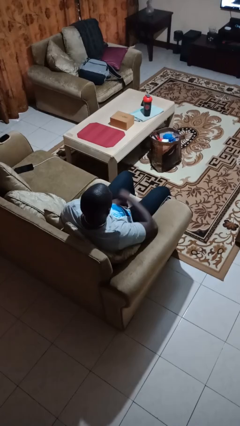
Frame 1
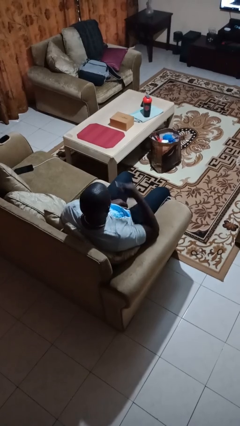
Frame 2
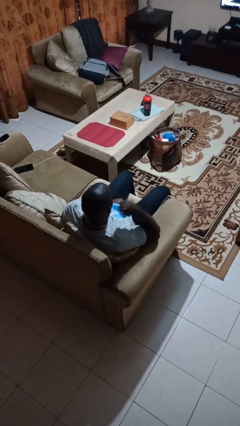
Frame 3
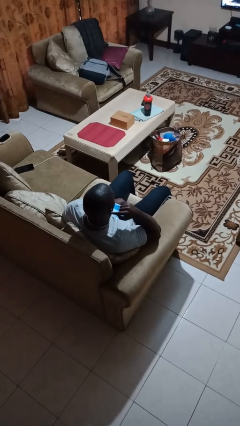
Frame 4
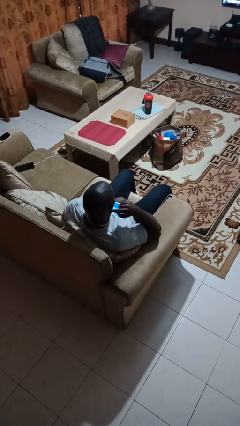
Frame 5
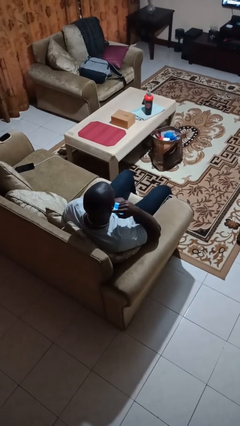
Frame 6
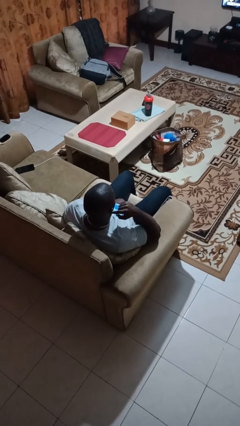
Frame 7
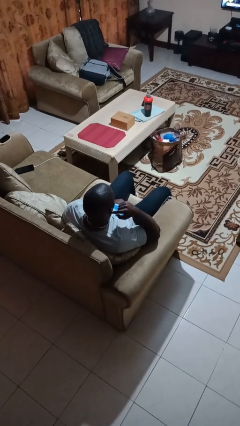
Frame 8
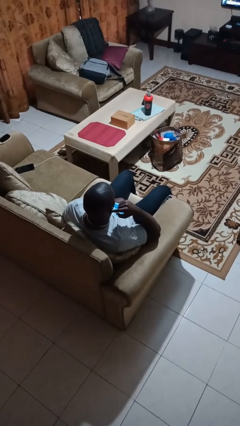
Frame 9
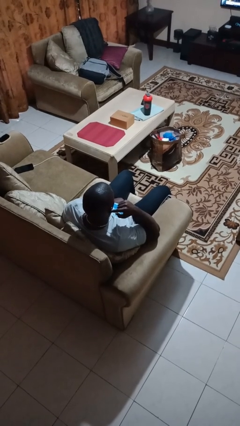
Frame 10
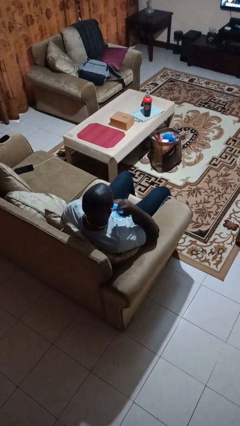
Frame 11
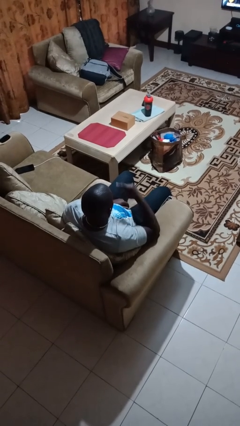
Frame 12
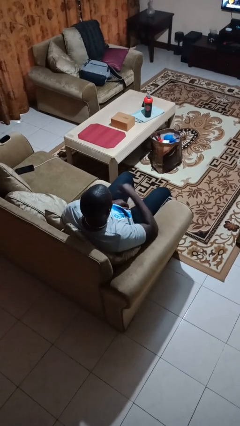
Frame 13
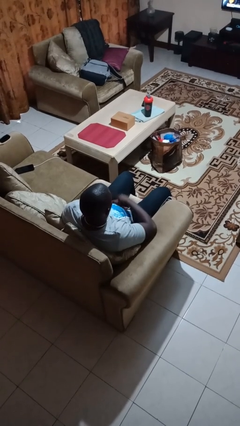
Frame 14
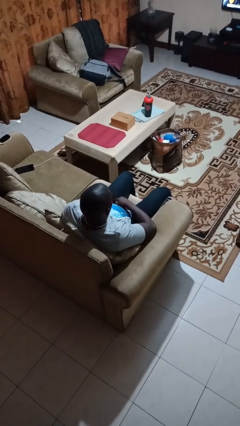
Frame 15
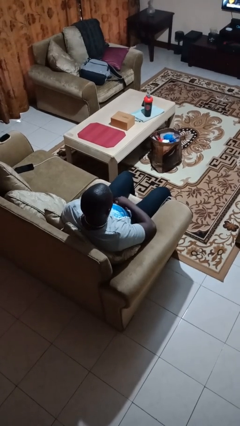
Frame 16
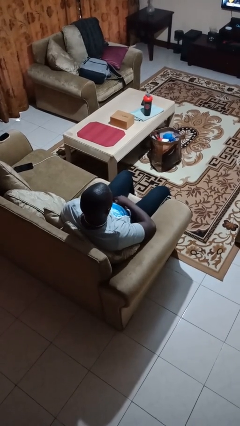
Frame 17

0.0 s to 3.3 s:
person gestures listen closely

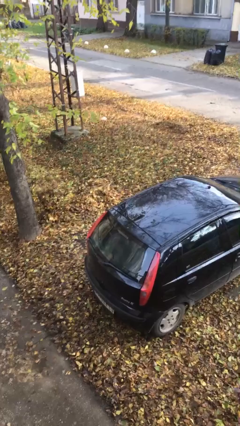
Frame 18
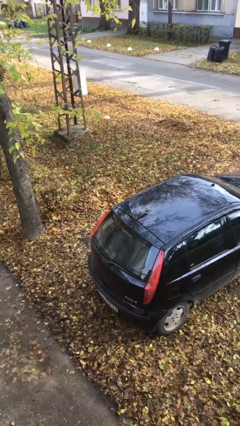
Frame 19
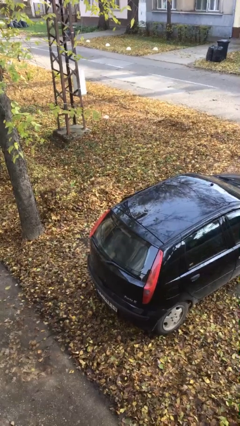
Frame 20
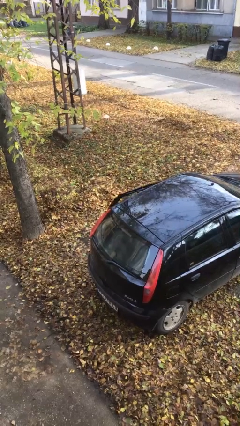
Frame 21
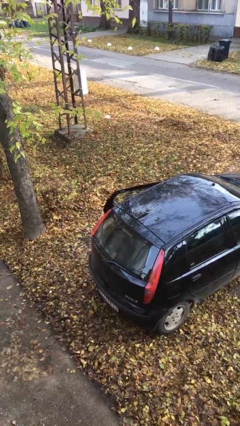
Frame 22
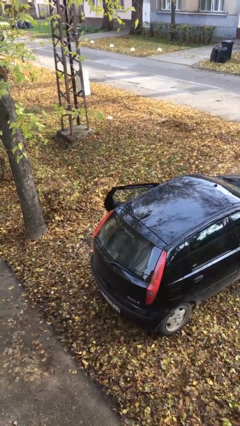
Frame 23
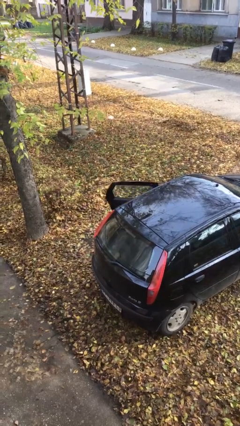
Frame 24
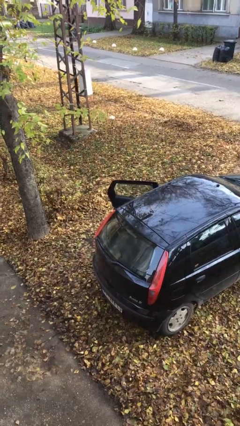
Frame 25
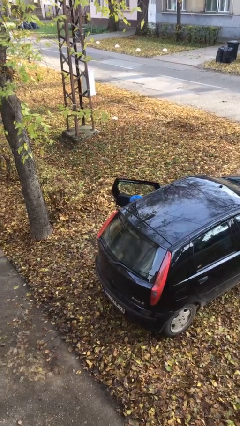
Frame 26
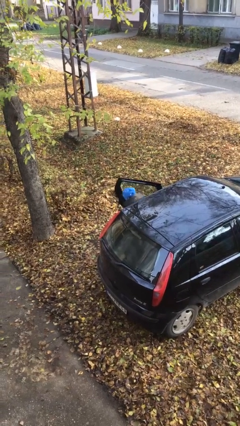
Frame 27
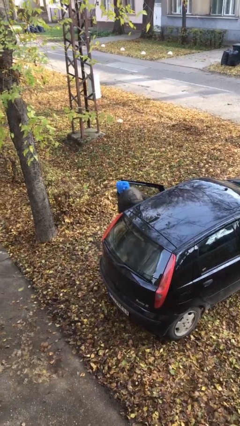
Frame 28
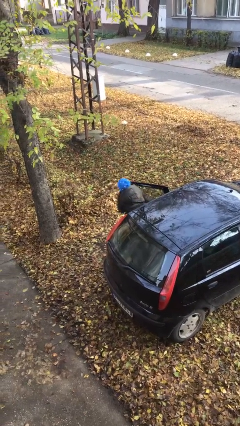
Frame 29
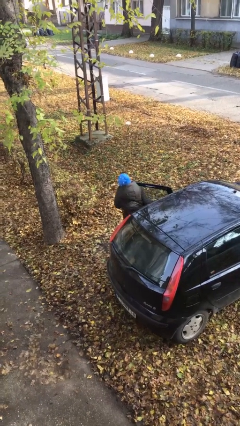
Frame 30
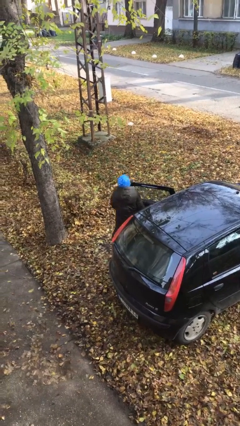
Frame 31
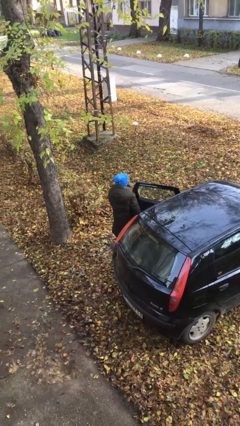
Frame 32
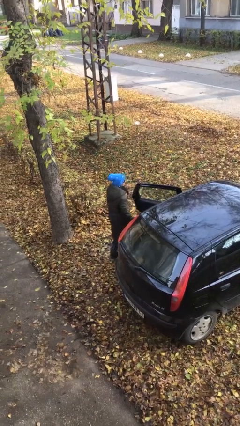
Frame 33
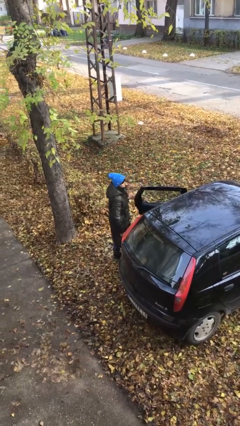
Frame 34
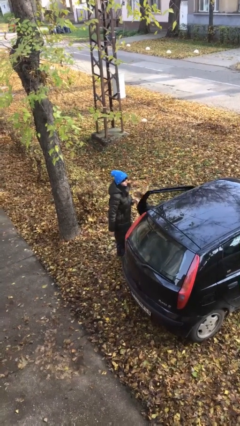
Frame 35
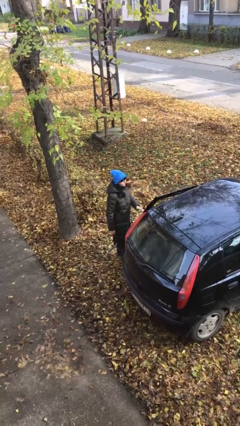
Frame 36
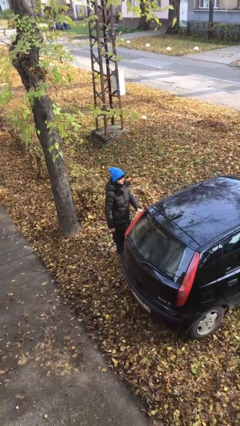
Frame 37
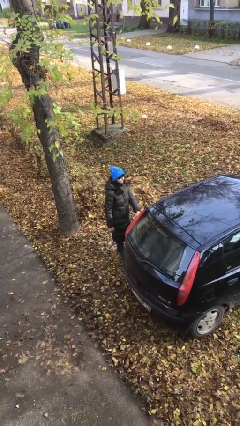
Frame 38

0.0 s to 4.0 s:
person exits car

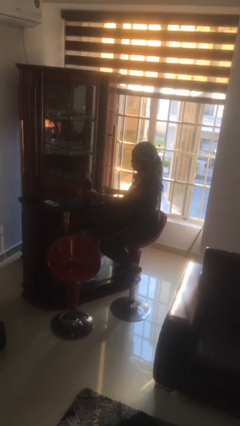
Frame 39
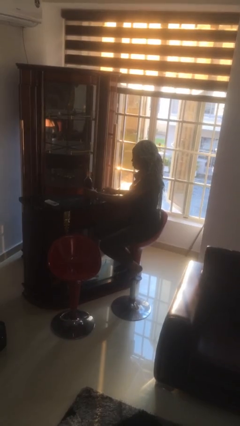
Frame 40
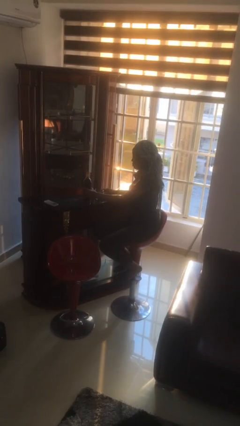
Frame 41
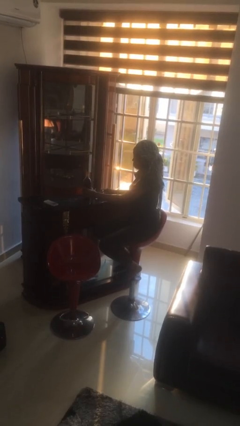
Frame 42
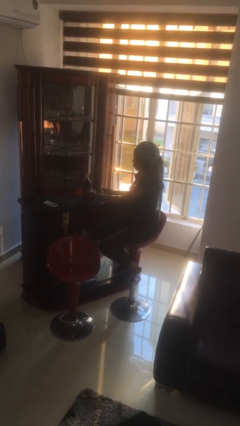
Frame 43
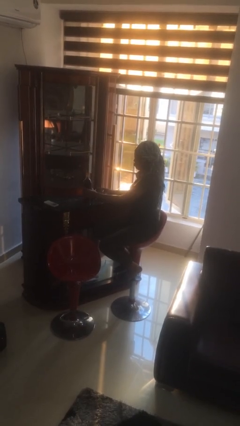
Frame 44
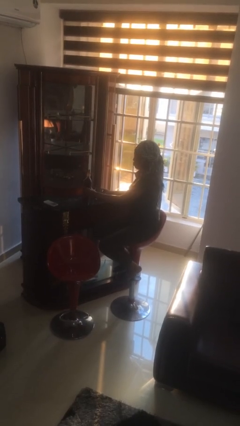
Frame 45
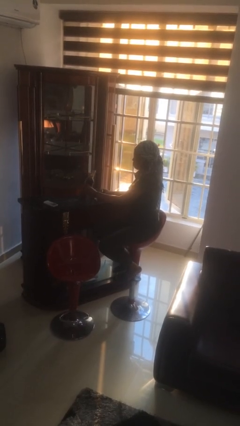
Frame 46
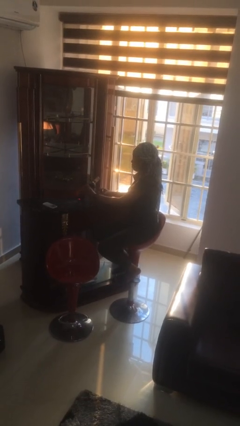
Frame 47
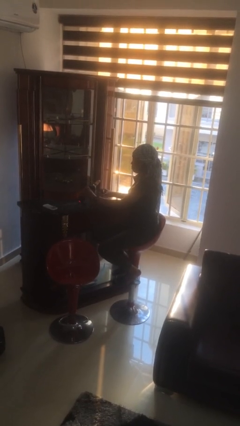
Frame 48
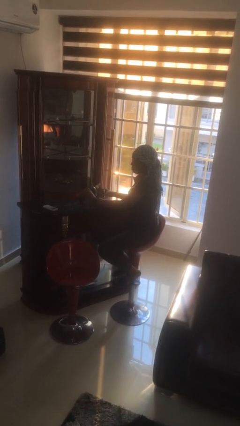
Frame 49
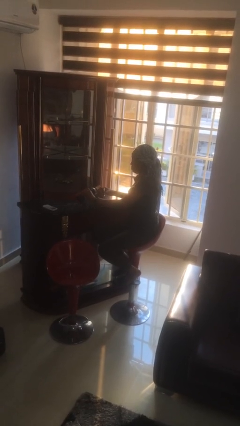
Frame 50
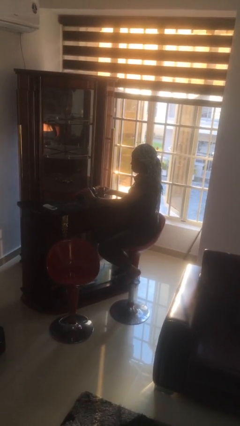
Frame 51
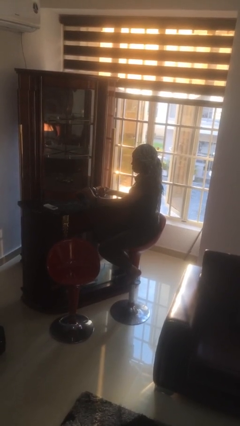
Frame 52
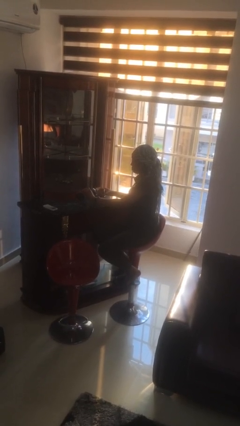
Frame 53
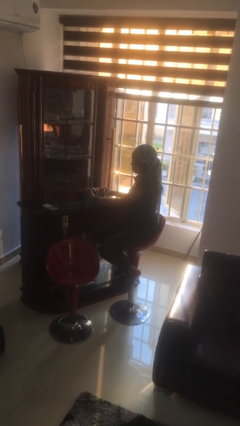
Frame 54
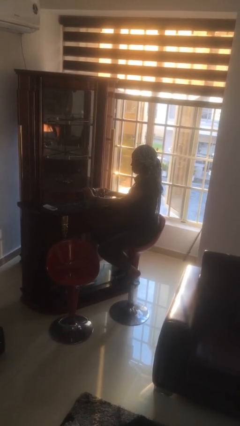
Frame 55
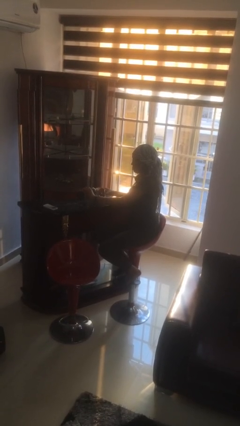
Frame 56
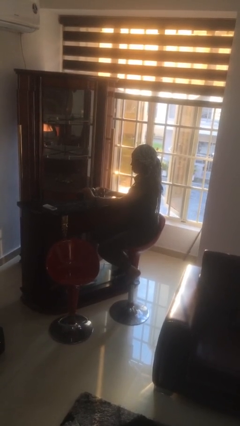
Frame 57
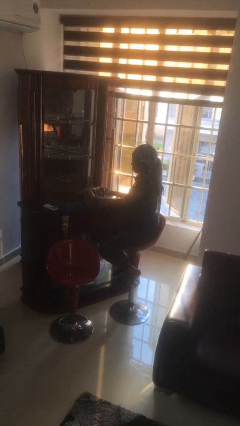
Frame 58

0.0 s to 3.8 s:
person pours liquid into cup

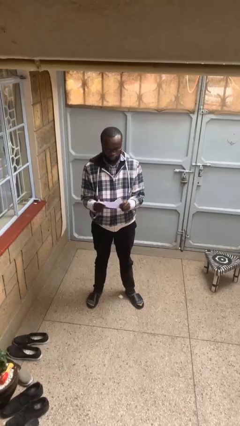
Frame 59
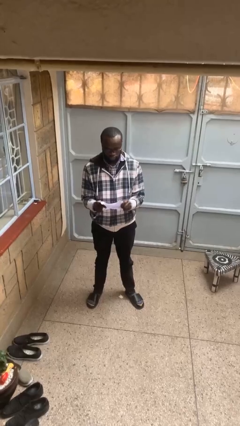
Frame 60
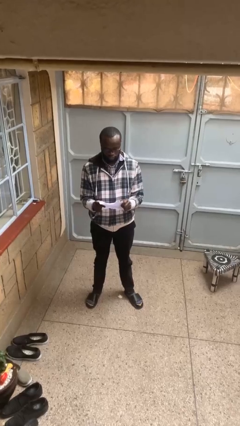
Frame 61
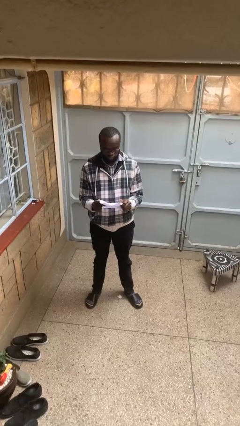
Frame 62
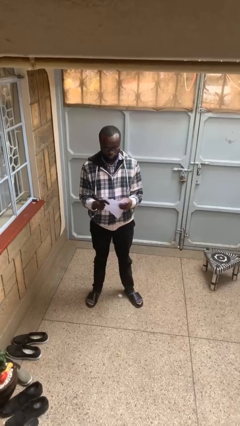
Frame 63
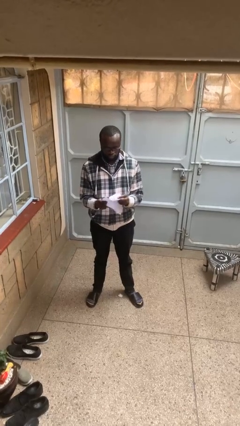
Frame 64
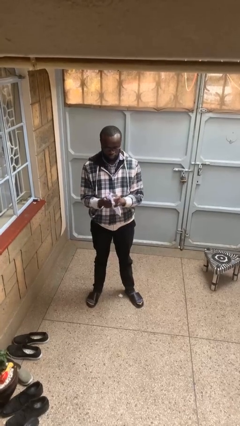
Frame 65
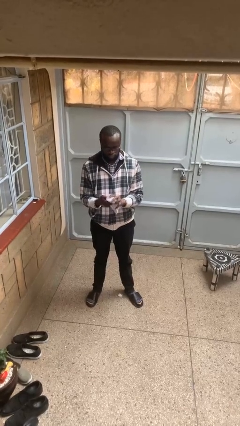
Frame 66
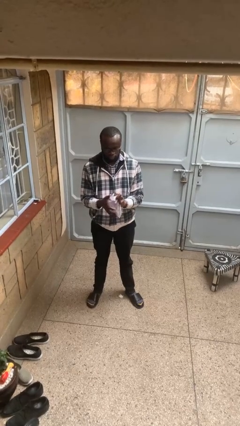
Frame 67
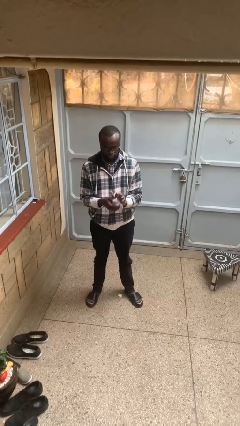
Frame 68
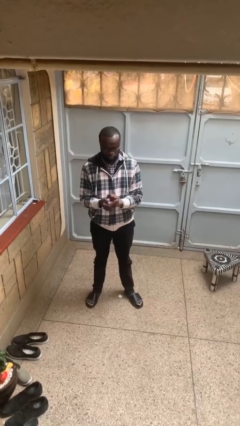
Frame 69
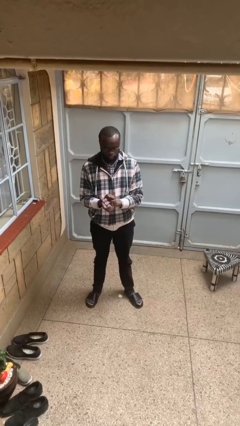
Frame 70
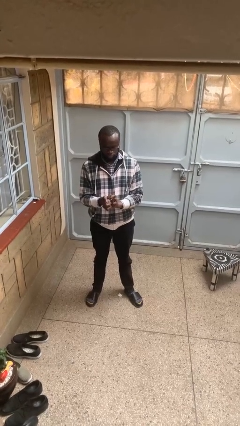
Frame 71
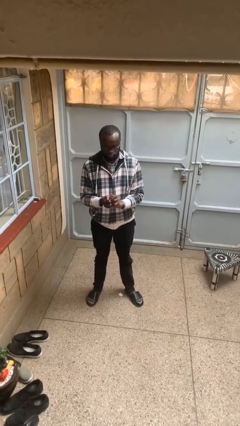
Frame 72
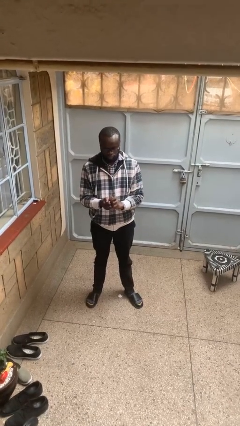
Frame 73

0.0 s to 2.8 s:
person crumples paper

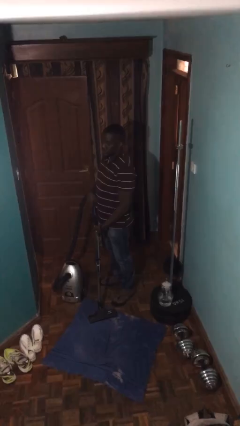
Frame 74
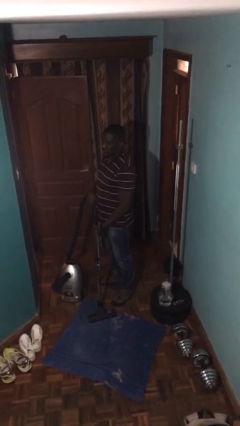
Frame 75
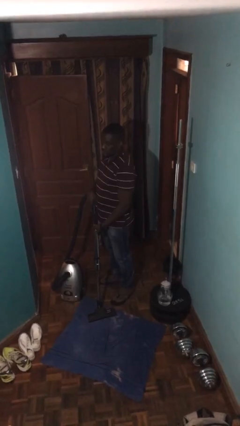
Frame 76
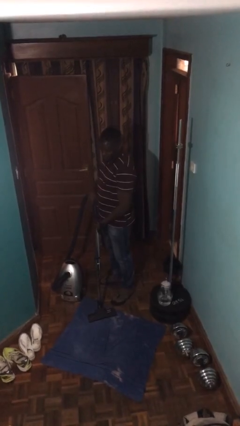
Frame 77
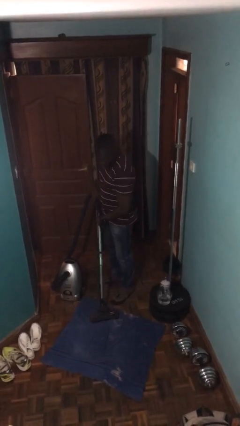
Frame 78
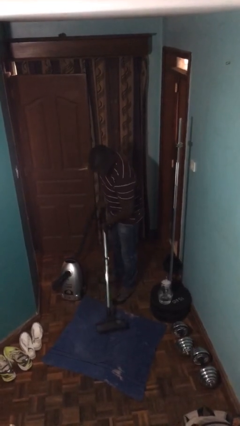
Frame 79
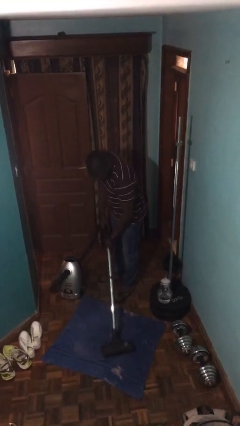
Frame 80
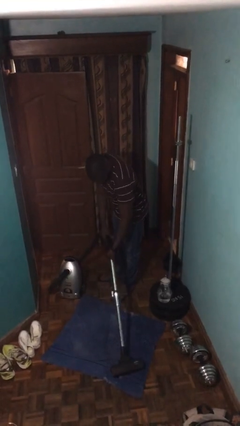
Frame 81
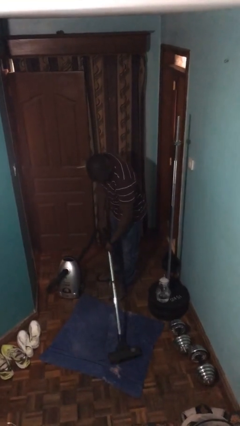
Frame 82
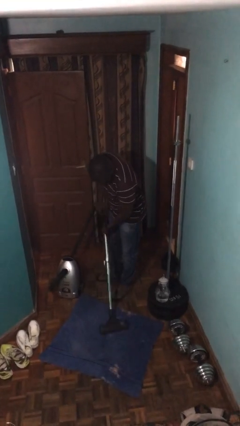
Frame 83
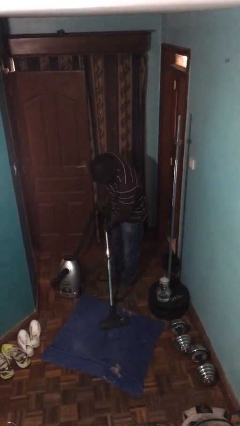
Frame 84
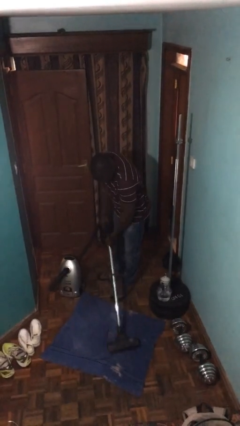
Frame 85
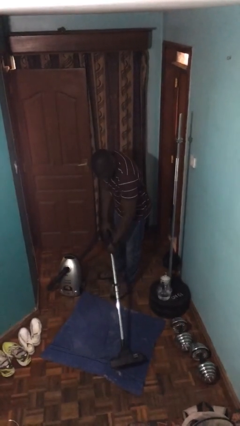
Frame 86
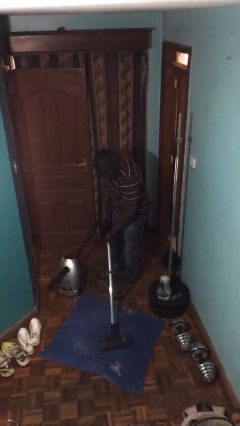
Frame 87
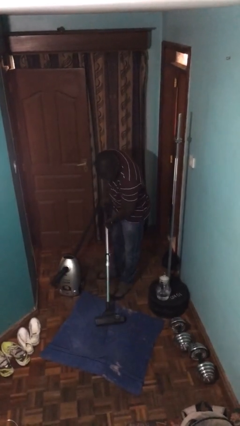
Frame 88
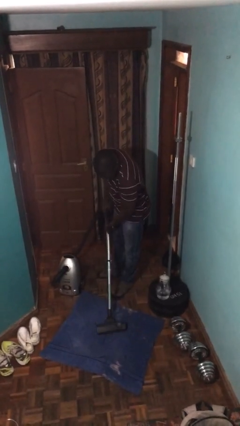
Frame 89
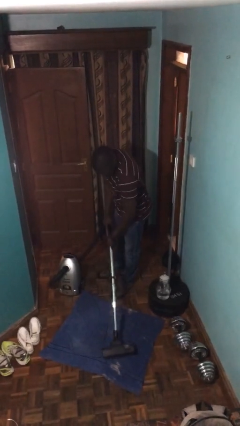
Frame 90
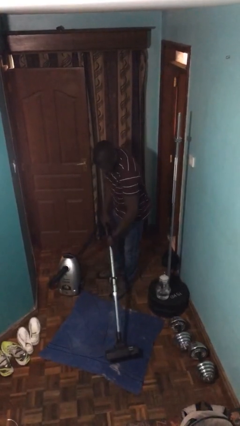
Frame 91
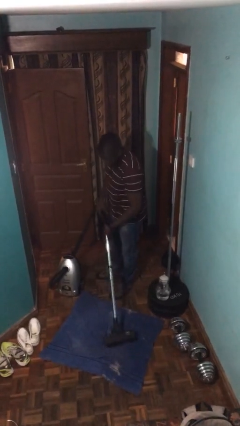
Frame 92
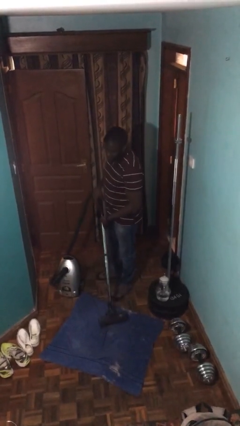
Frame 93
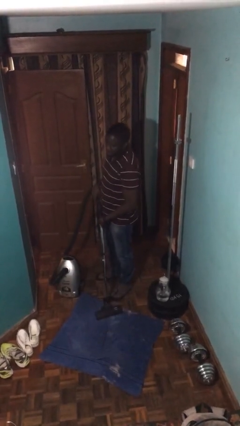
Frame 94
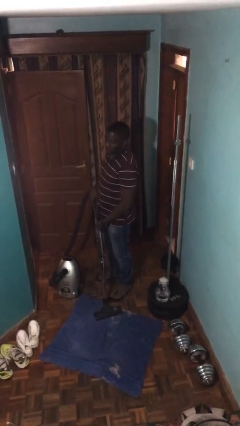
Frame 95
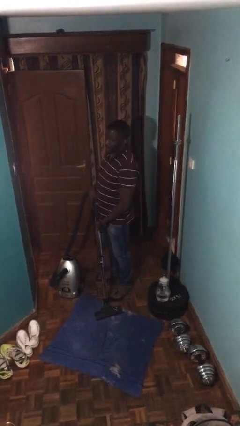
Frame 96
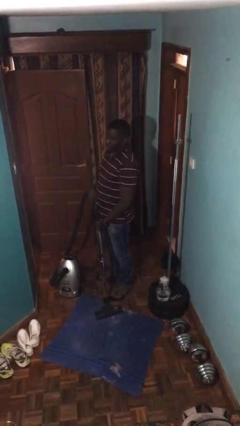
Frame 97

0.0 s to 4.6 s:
person vacuums carpet
